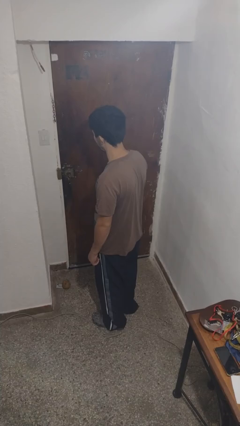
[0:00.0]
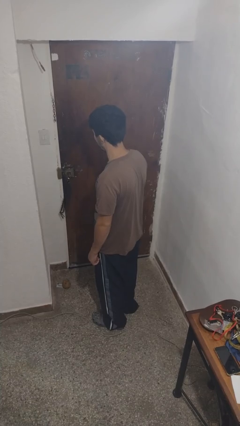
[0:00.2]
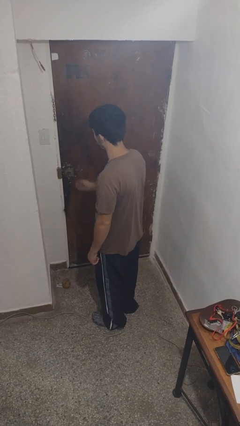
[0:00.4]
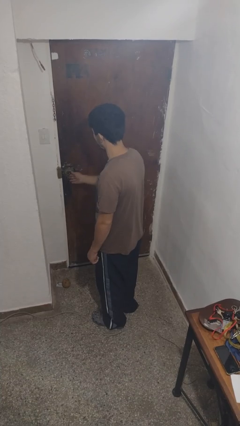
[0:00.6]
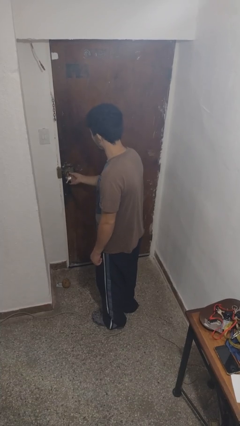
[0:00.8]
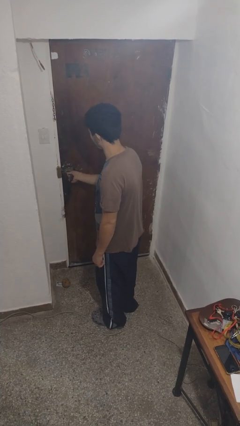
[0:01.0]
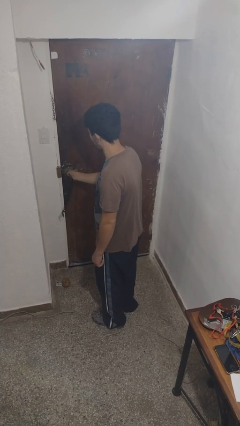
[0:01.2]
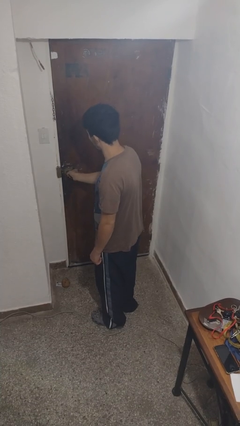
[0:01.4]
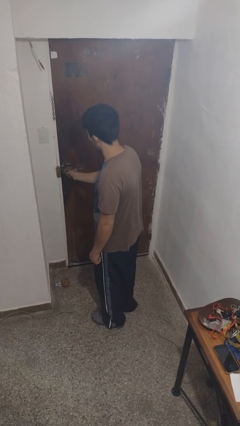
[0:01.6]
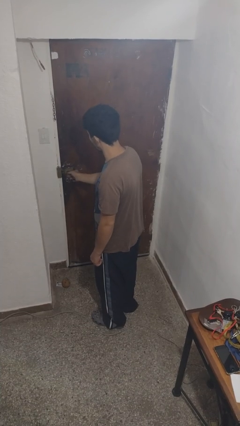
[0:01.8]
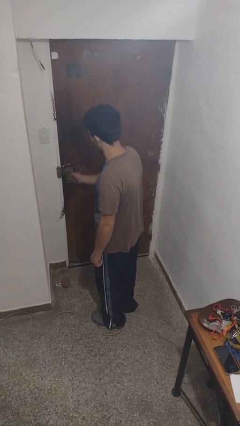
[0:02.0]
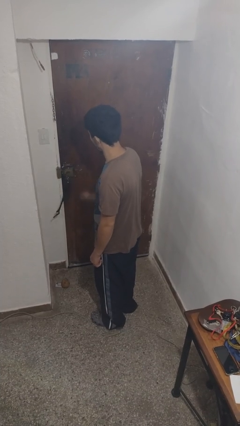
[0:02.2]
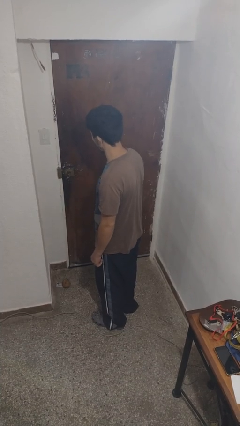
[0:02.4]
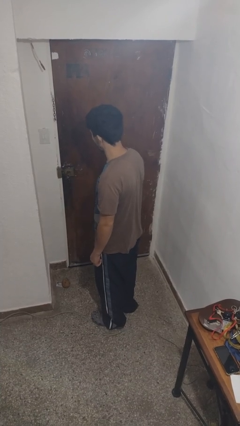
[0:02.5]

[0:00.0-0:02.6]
person unlocks door with keys

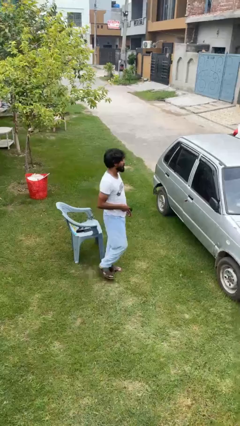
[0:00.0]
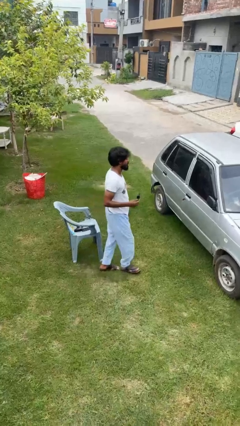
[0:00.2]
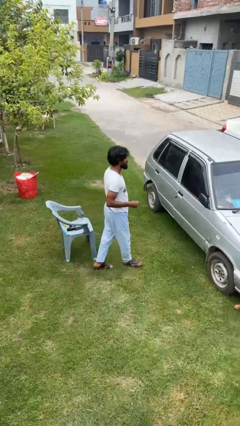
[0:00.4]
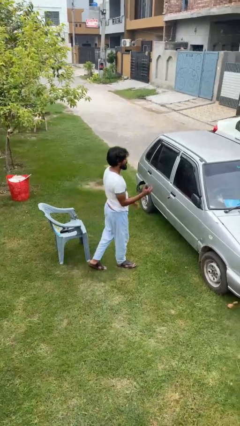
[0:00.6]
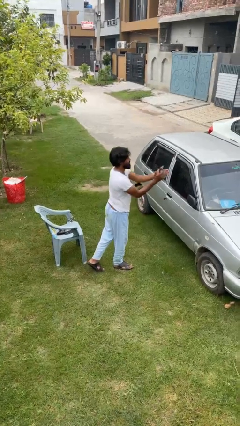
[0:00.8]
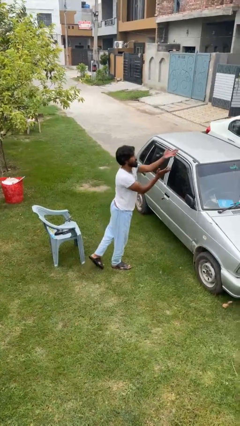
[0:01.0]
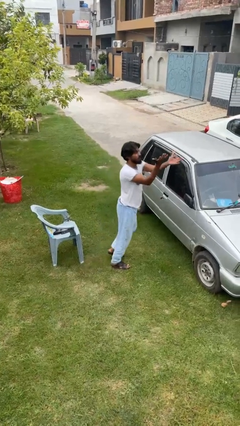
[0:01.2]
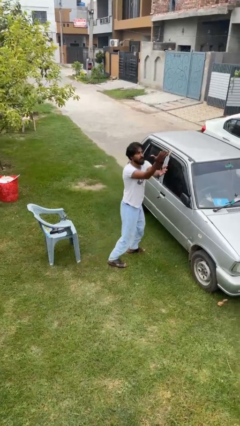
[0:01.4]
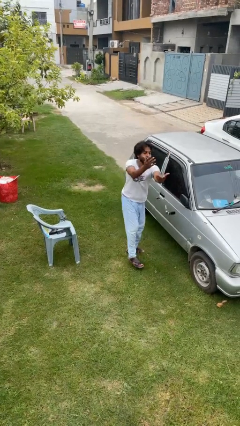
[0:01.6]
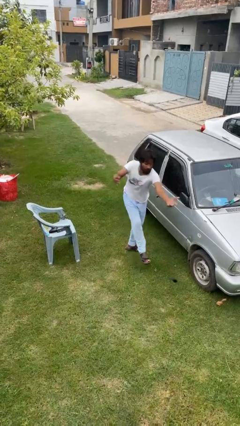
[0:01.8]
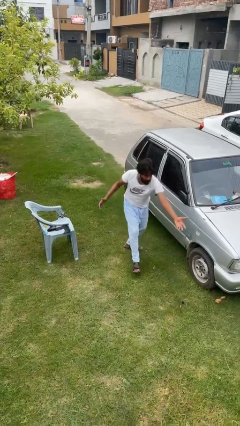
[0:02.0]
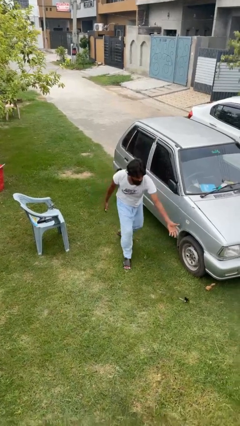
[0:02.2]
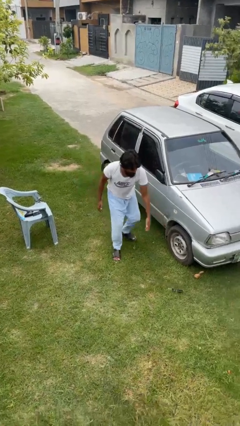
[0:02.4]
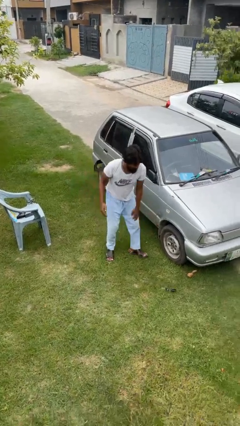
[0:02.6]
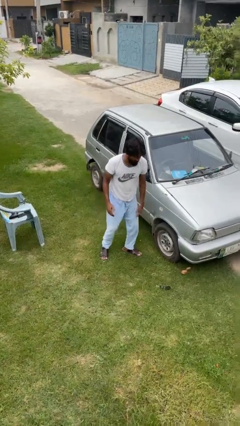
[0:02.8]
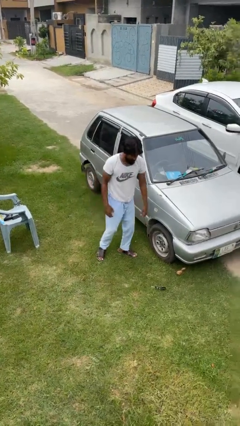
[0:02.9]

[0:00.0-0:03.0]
person drops object

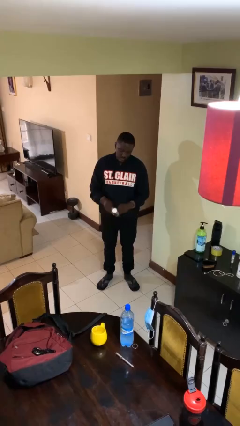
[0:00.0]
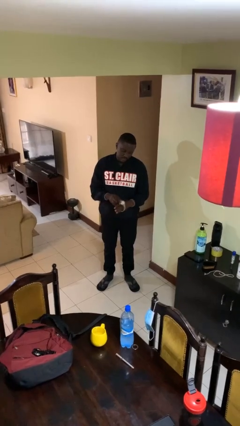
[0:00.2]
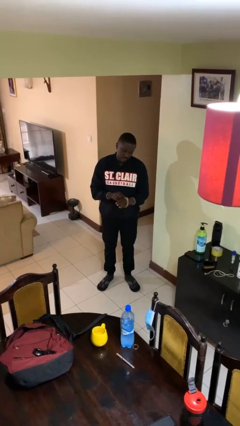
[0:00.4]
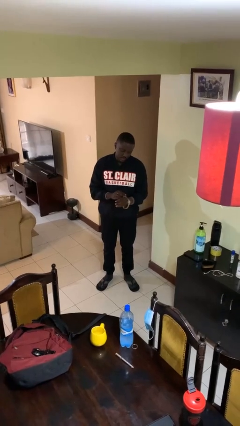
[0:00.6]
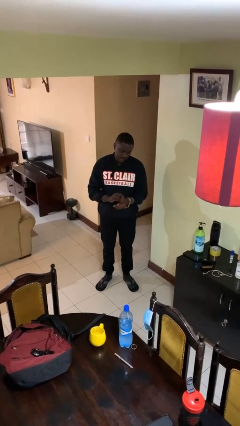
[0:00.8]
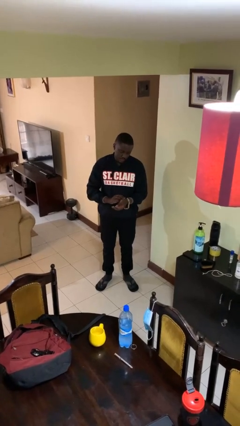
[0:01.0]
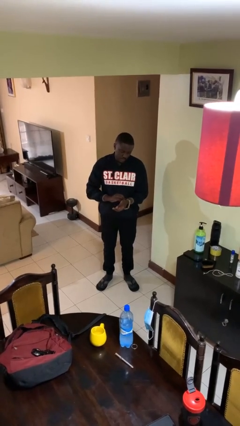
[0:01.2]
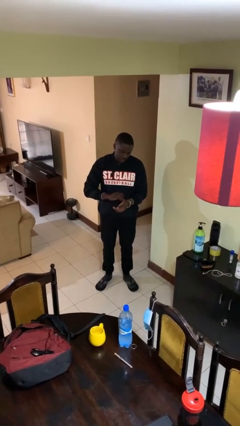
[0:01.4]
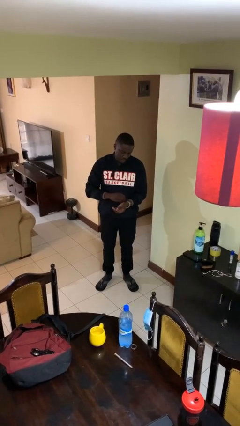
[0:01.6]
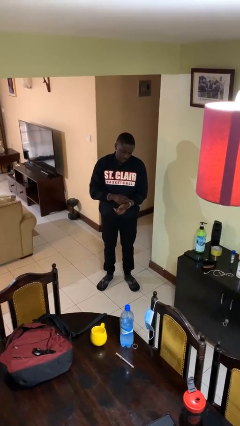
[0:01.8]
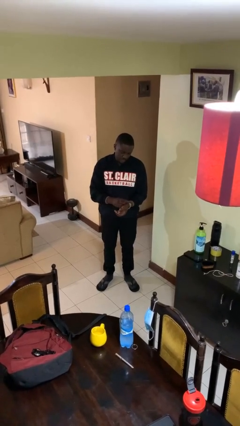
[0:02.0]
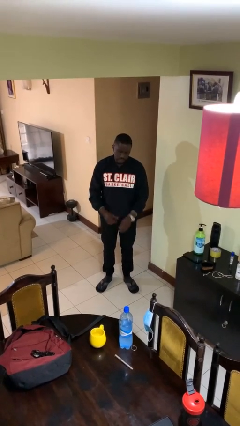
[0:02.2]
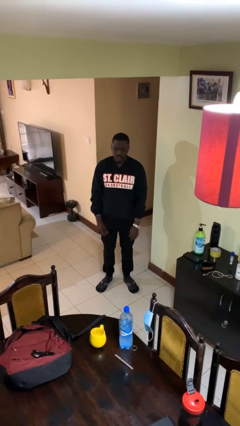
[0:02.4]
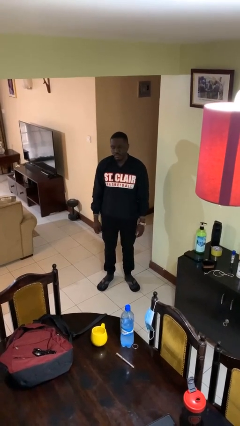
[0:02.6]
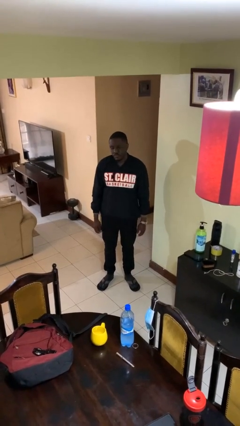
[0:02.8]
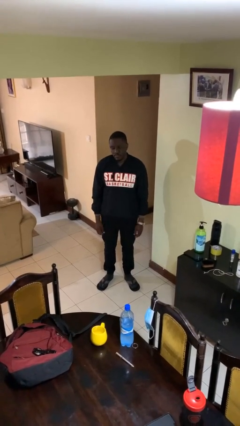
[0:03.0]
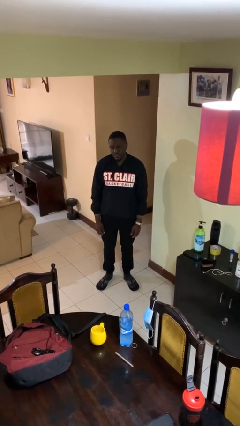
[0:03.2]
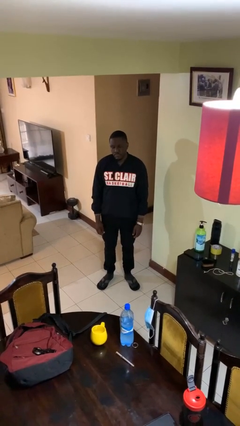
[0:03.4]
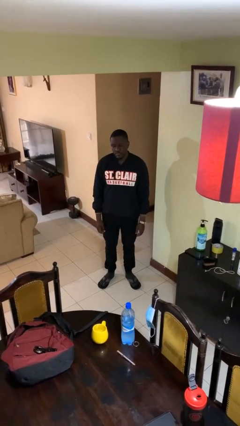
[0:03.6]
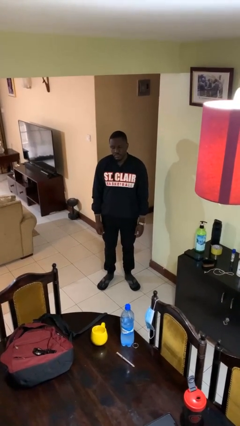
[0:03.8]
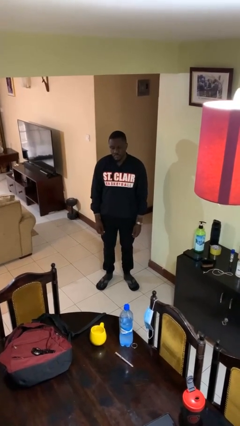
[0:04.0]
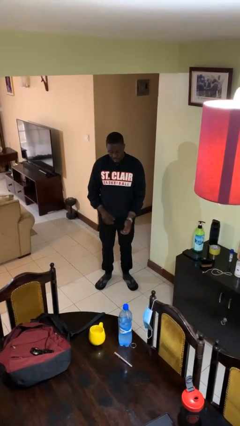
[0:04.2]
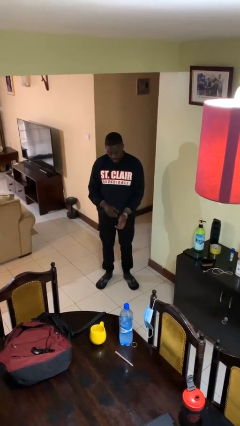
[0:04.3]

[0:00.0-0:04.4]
person puts on wristwatch

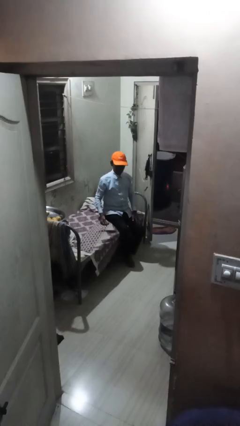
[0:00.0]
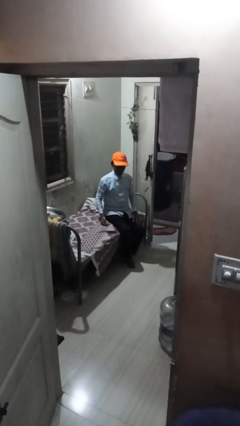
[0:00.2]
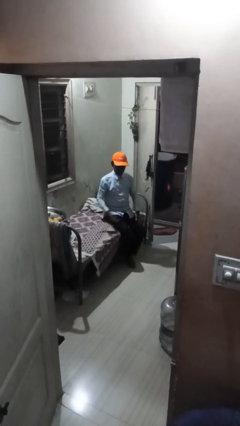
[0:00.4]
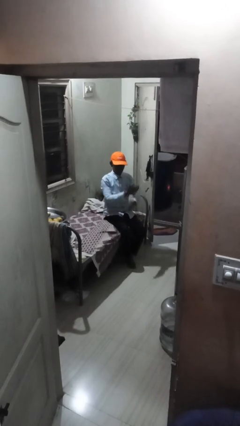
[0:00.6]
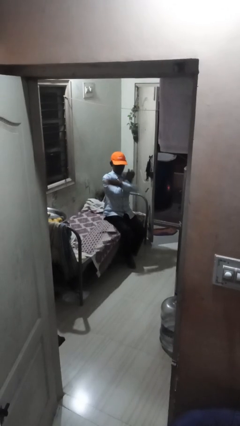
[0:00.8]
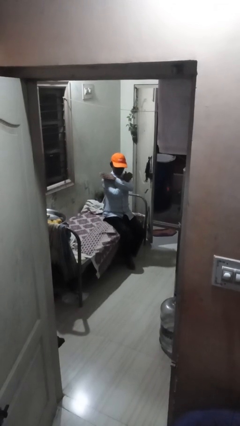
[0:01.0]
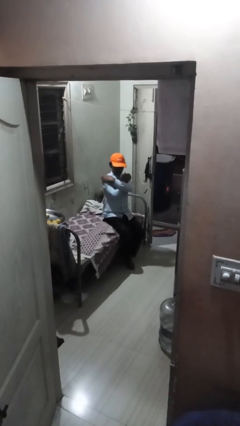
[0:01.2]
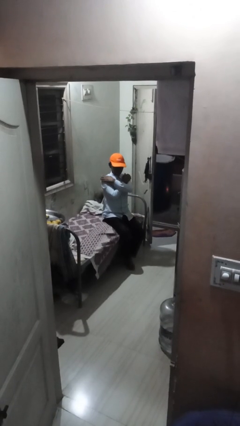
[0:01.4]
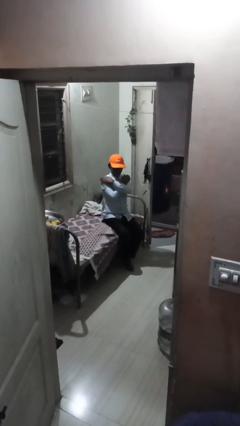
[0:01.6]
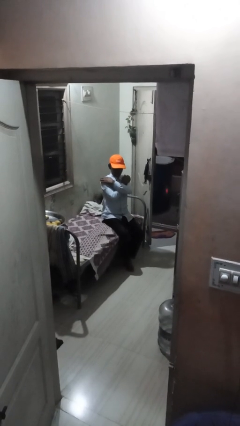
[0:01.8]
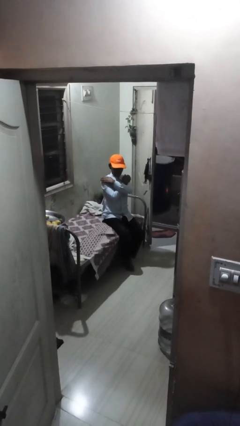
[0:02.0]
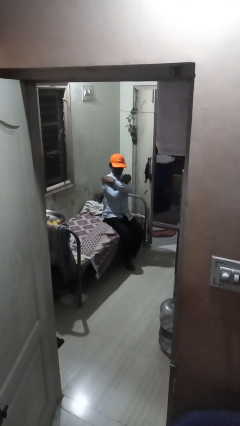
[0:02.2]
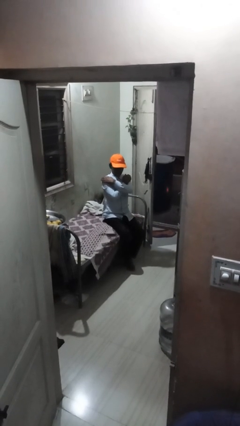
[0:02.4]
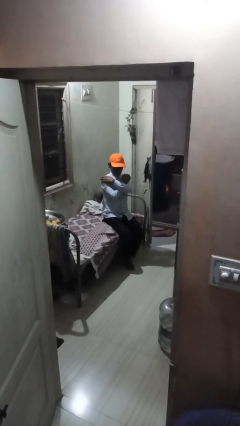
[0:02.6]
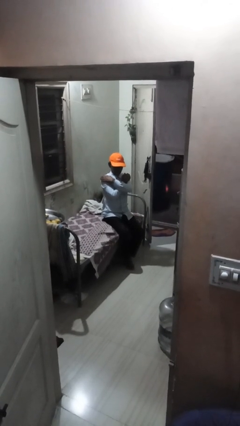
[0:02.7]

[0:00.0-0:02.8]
person gestures arms x

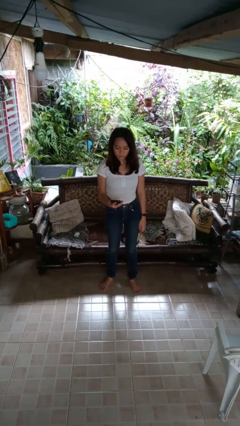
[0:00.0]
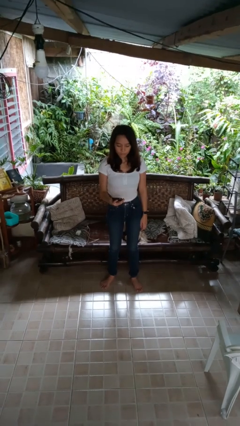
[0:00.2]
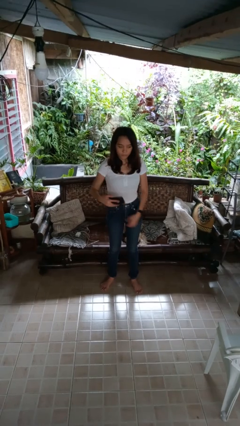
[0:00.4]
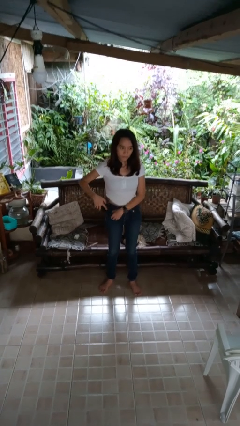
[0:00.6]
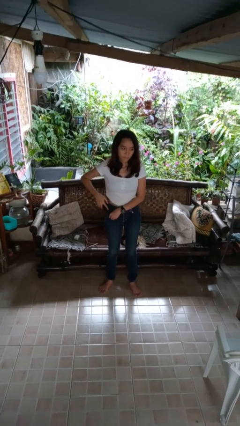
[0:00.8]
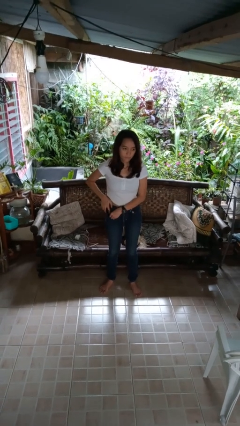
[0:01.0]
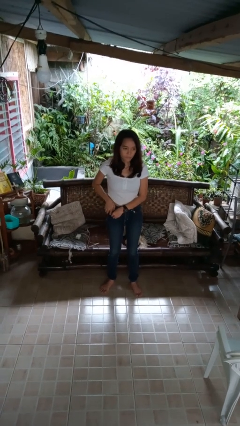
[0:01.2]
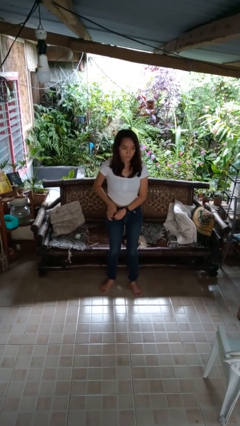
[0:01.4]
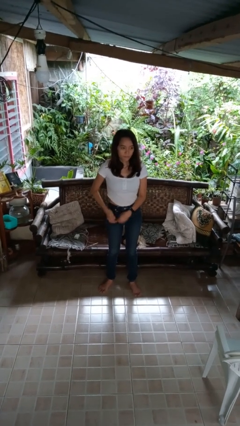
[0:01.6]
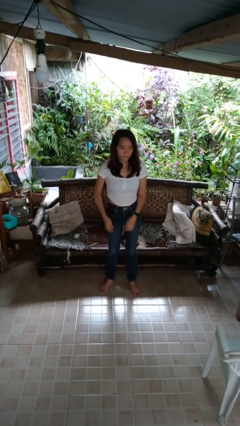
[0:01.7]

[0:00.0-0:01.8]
person puts phone into pocket

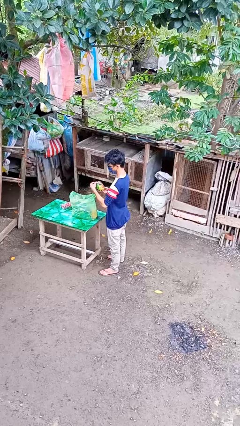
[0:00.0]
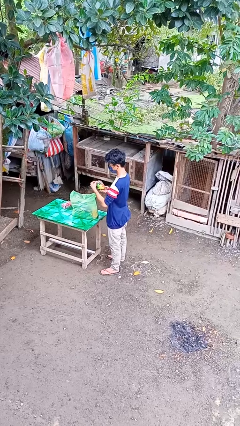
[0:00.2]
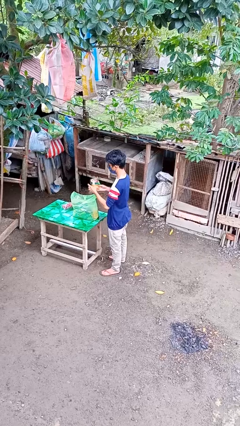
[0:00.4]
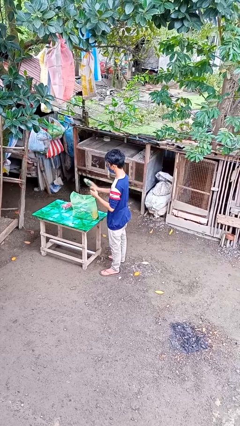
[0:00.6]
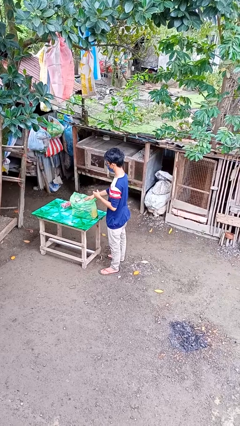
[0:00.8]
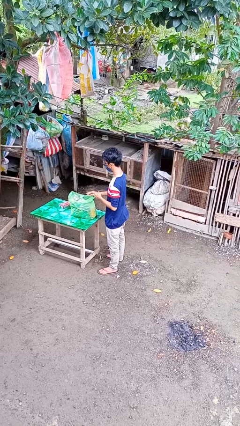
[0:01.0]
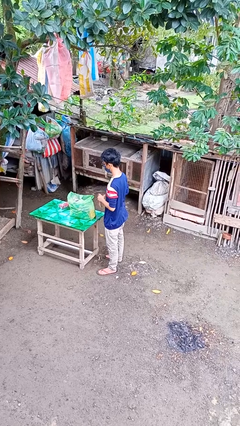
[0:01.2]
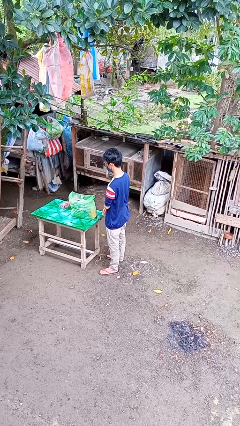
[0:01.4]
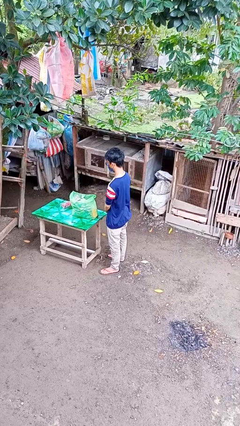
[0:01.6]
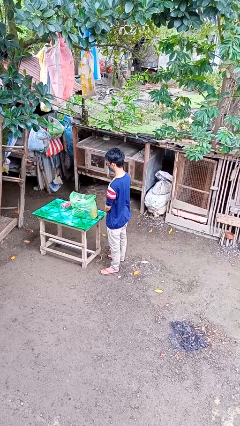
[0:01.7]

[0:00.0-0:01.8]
person puts object into bag

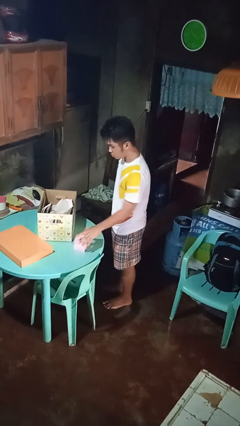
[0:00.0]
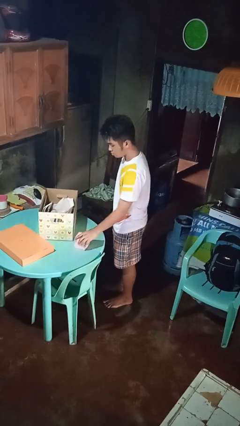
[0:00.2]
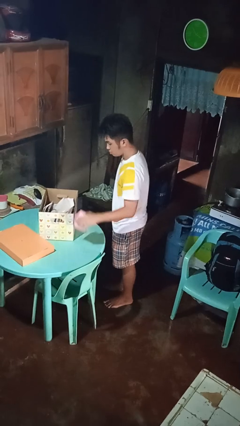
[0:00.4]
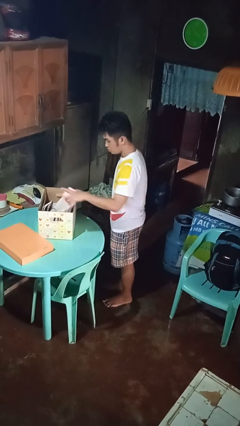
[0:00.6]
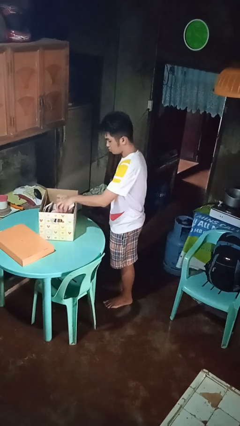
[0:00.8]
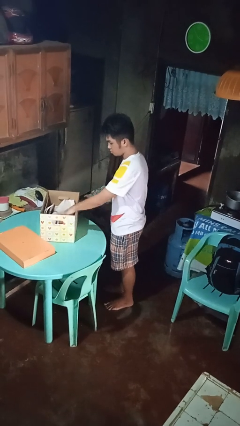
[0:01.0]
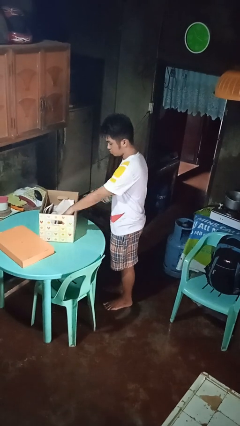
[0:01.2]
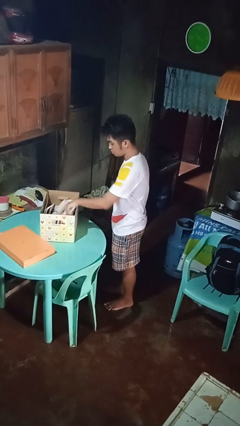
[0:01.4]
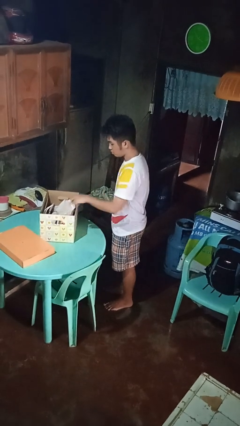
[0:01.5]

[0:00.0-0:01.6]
person puts object into box
